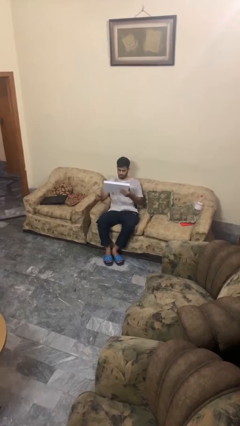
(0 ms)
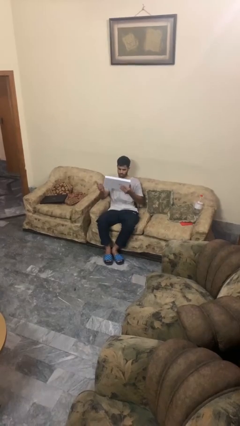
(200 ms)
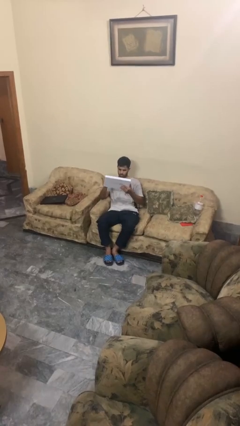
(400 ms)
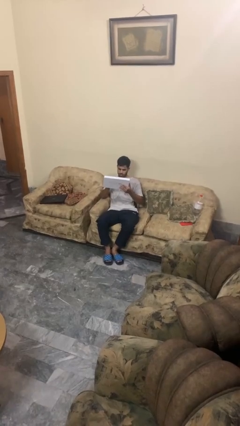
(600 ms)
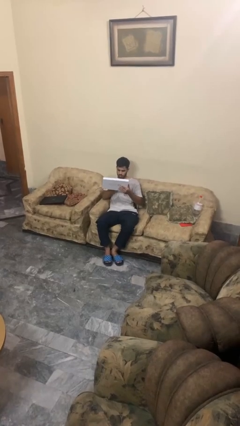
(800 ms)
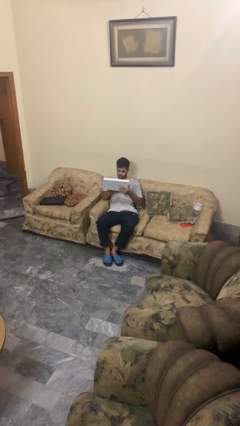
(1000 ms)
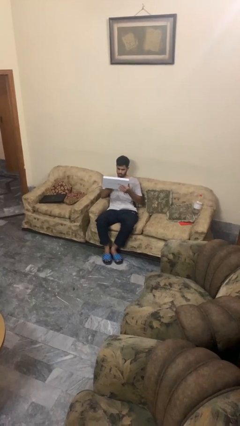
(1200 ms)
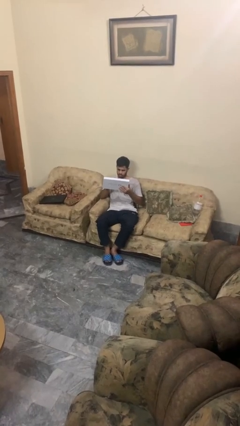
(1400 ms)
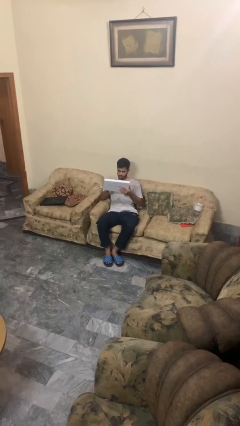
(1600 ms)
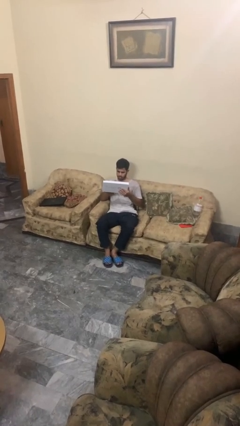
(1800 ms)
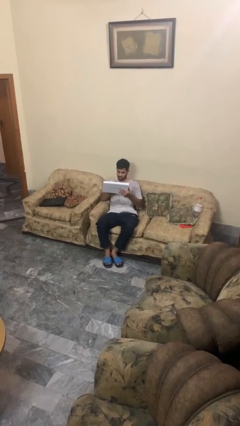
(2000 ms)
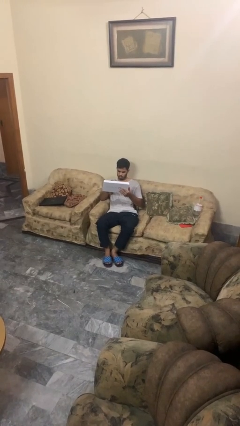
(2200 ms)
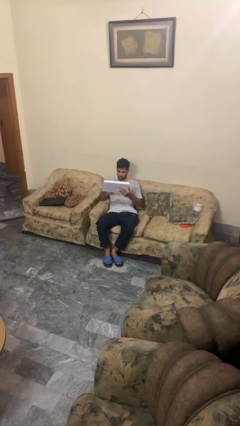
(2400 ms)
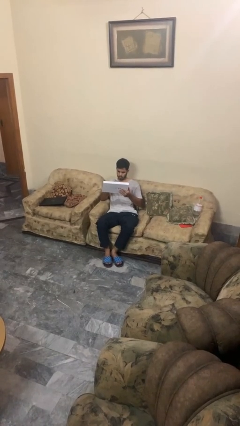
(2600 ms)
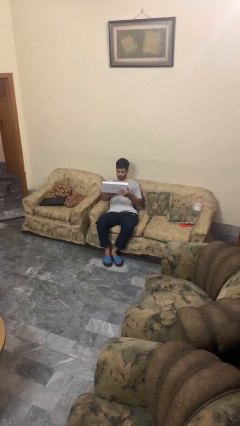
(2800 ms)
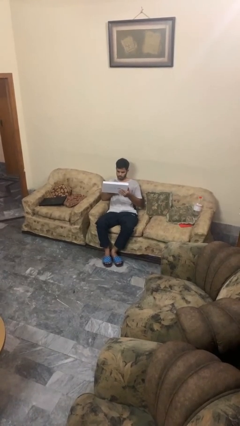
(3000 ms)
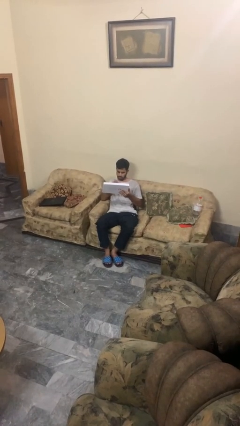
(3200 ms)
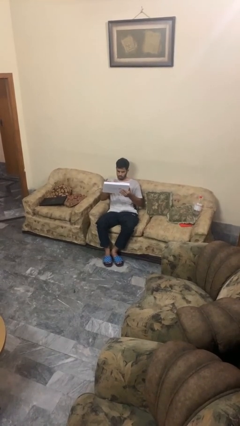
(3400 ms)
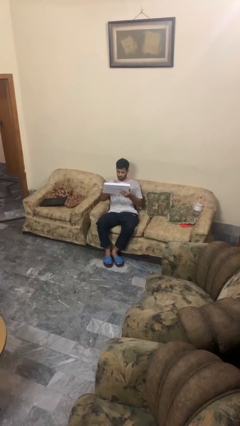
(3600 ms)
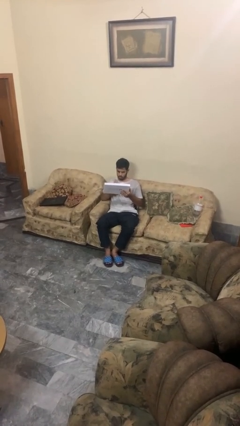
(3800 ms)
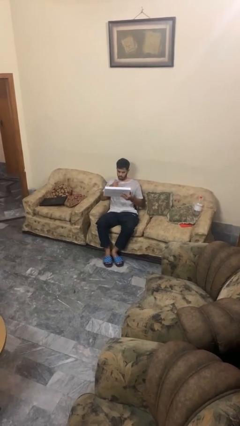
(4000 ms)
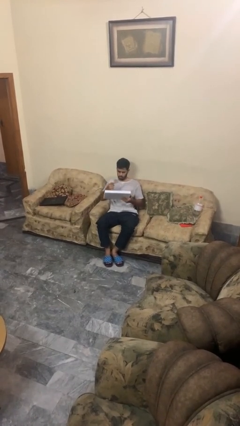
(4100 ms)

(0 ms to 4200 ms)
person interacts with tablet

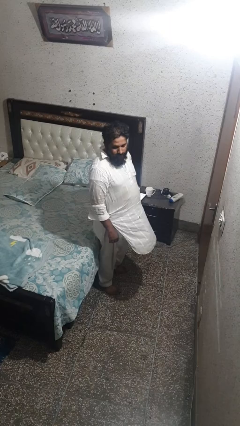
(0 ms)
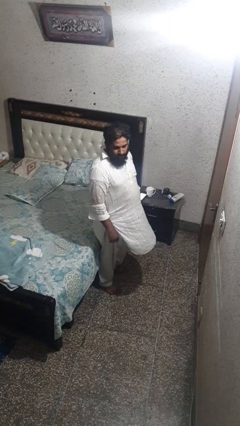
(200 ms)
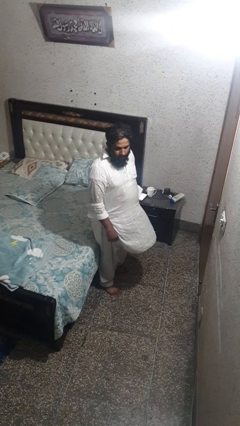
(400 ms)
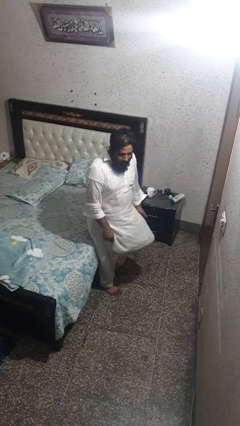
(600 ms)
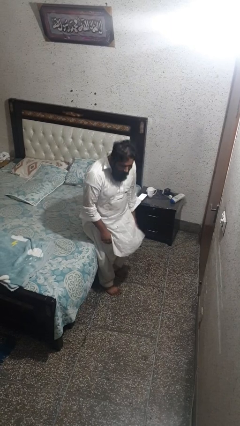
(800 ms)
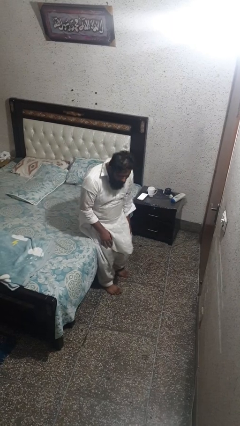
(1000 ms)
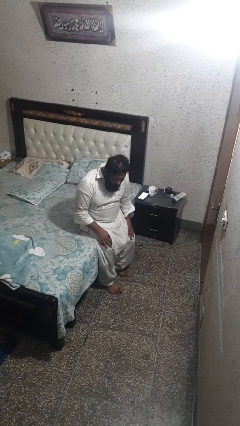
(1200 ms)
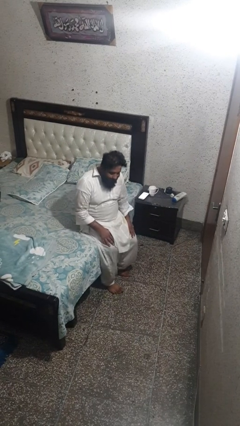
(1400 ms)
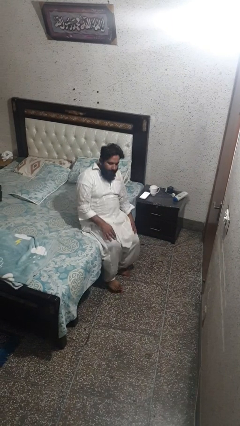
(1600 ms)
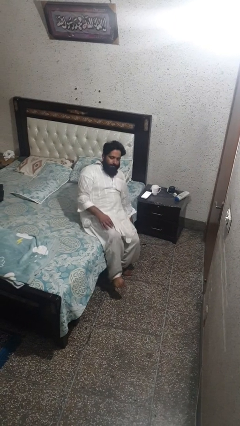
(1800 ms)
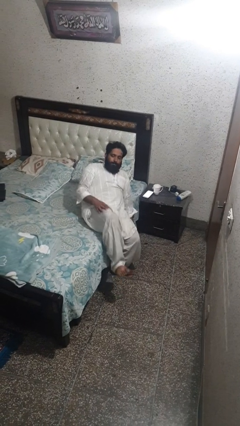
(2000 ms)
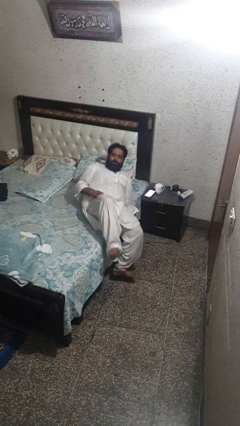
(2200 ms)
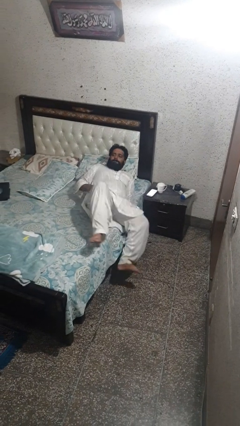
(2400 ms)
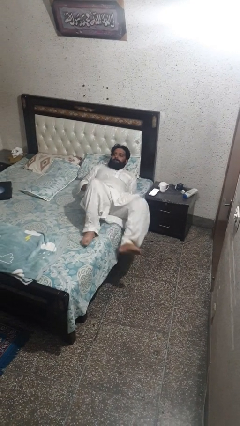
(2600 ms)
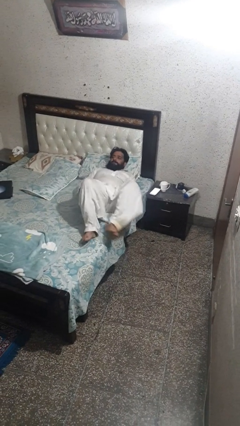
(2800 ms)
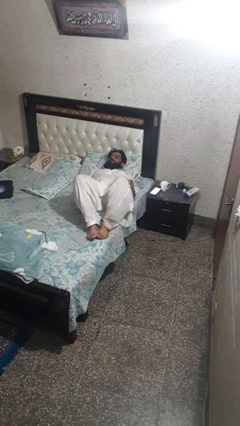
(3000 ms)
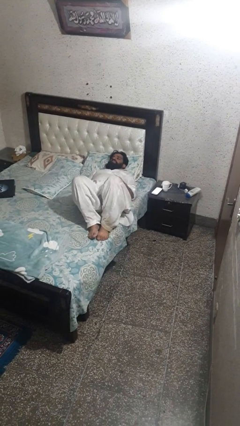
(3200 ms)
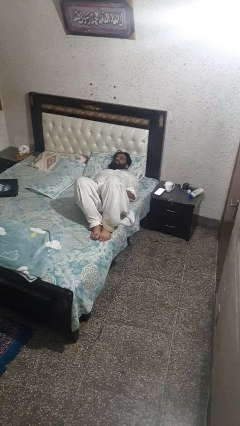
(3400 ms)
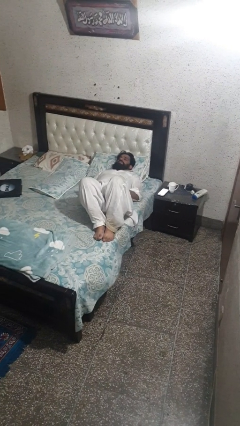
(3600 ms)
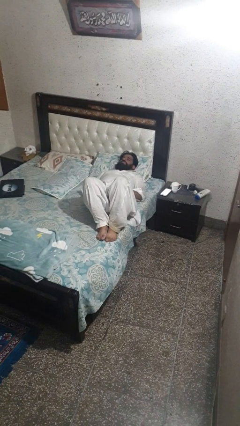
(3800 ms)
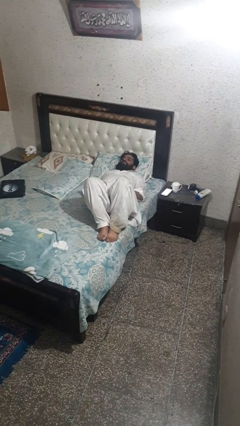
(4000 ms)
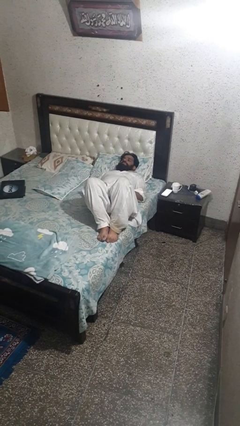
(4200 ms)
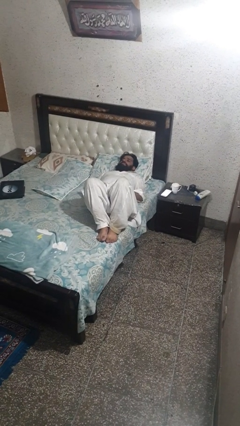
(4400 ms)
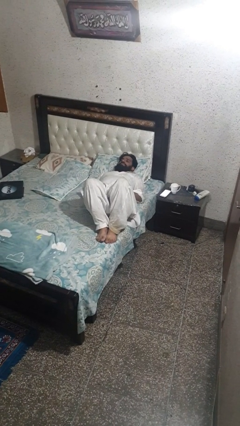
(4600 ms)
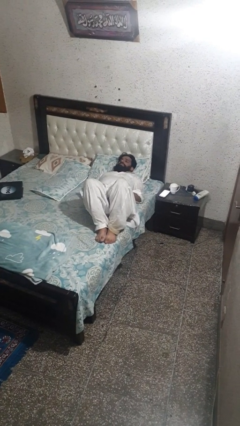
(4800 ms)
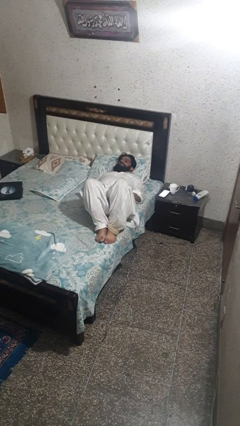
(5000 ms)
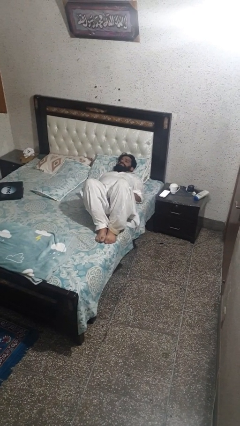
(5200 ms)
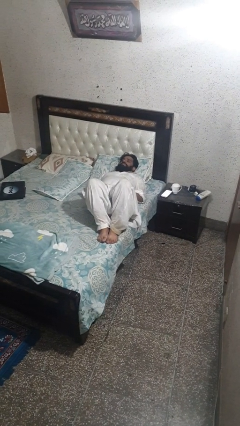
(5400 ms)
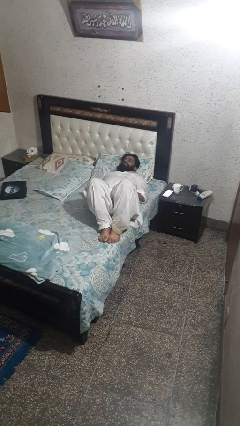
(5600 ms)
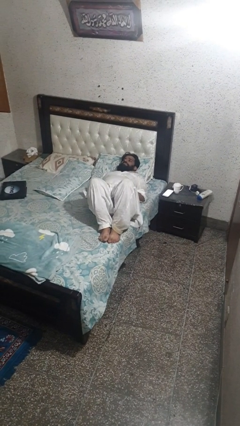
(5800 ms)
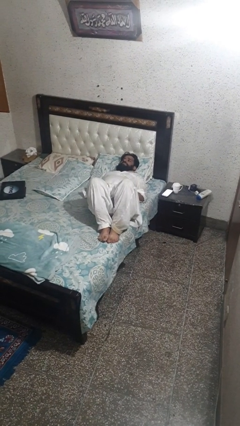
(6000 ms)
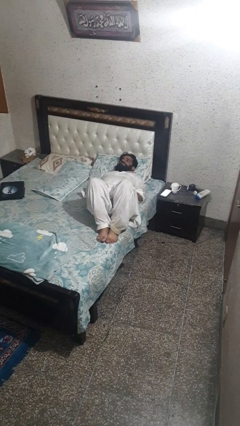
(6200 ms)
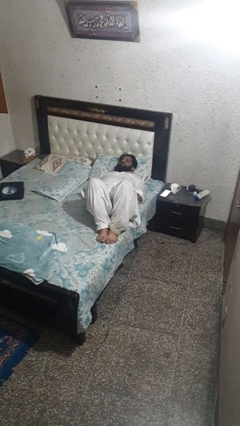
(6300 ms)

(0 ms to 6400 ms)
person lies down on bed

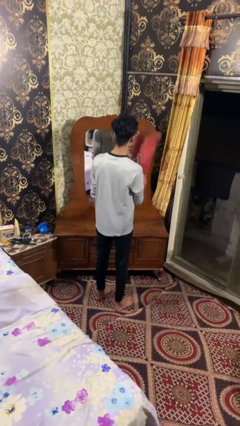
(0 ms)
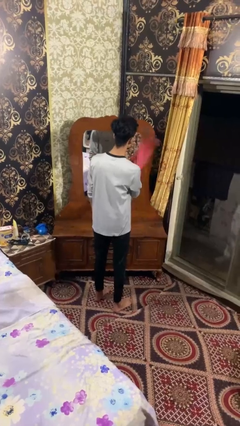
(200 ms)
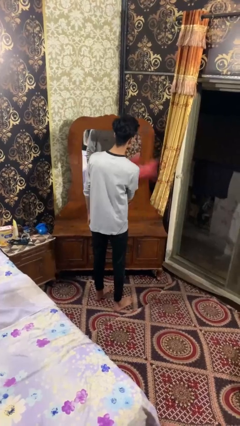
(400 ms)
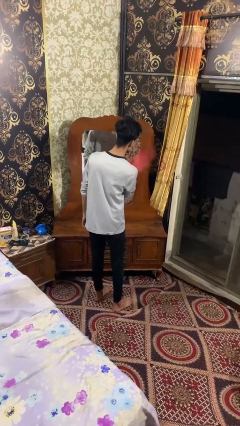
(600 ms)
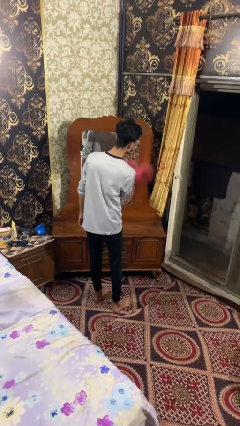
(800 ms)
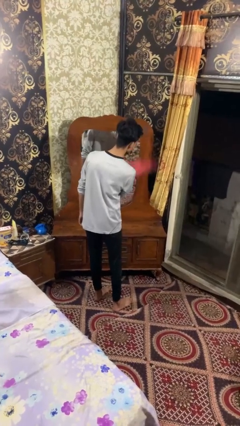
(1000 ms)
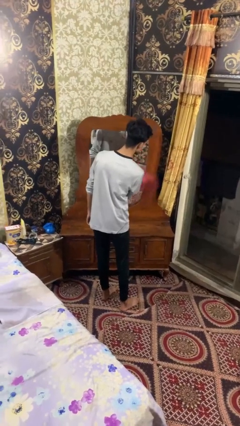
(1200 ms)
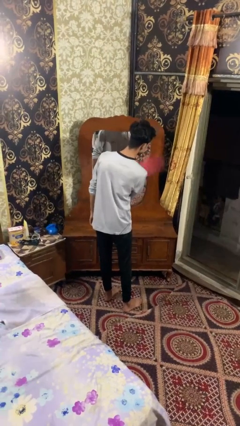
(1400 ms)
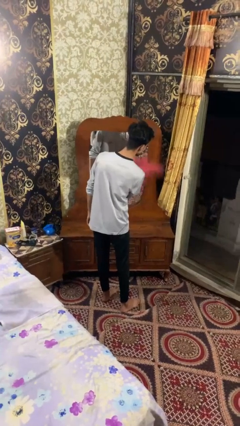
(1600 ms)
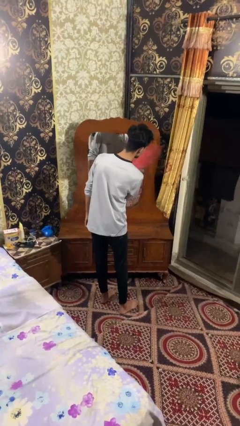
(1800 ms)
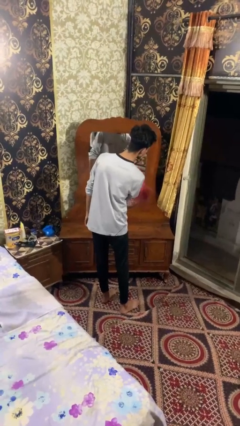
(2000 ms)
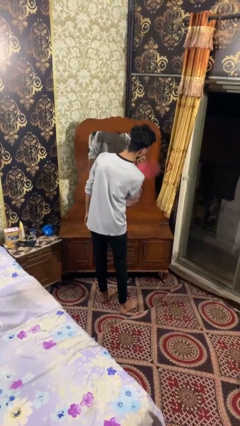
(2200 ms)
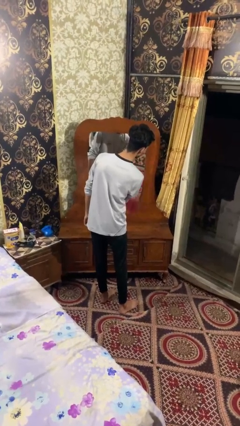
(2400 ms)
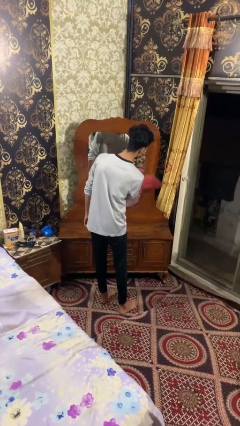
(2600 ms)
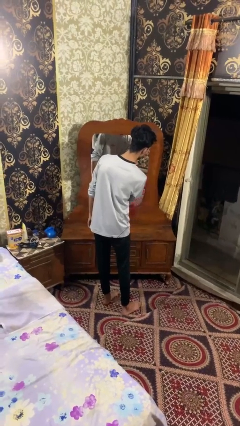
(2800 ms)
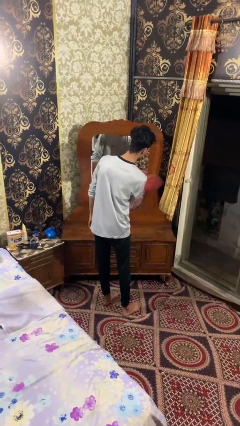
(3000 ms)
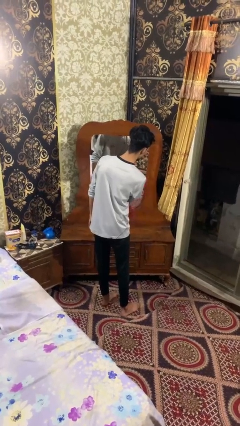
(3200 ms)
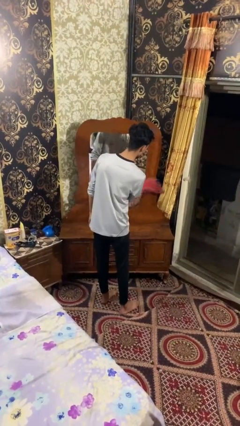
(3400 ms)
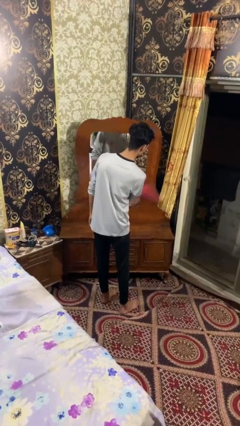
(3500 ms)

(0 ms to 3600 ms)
person dusts furniture

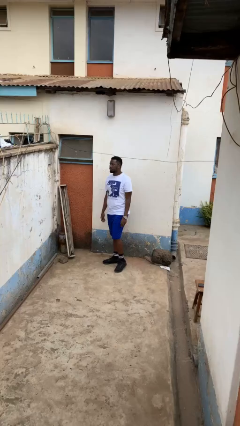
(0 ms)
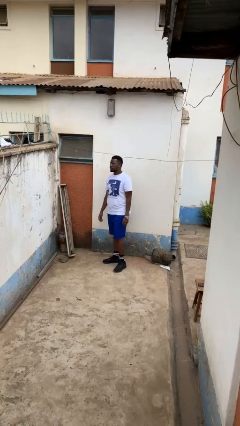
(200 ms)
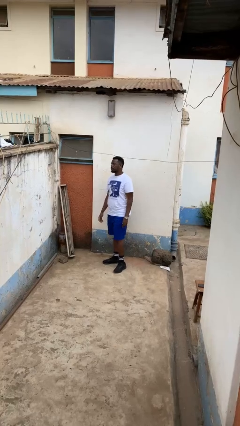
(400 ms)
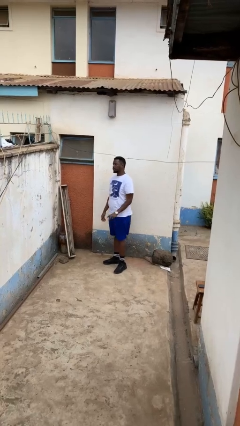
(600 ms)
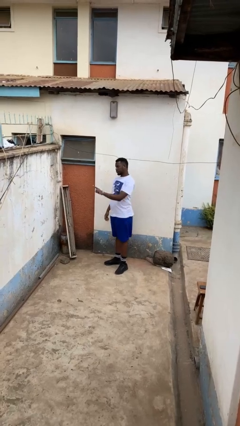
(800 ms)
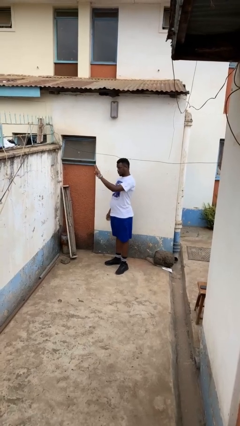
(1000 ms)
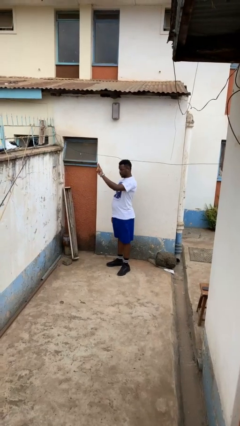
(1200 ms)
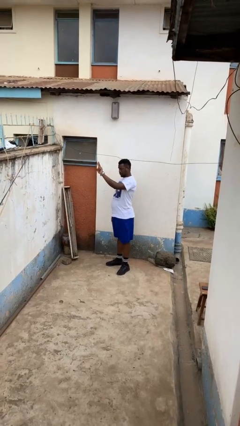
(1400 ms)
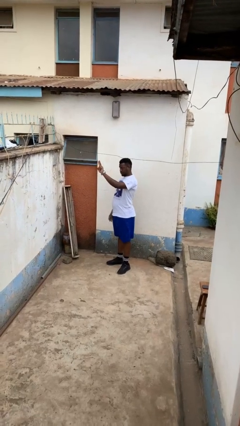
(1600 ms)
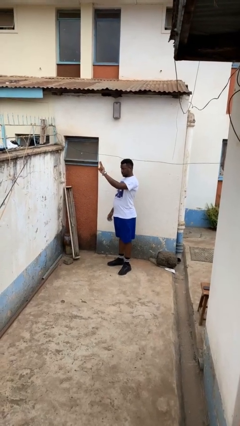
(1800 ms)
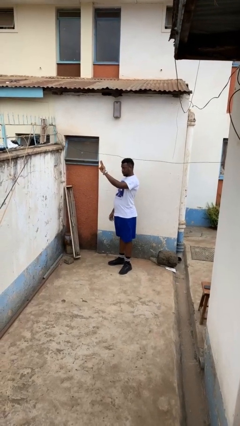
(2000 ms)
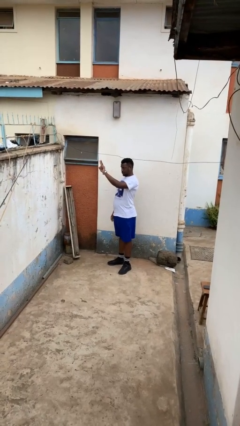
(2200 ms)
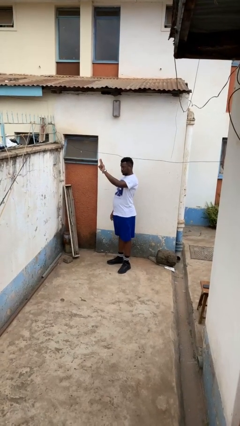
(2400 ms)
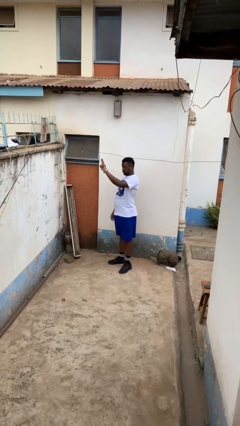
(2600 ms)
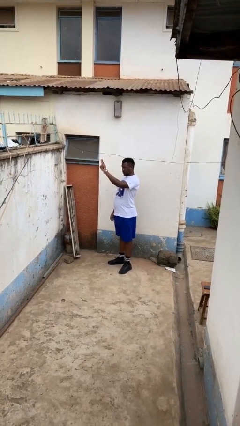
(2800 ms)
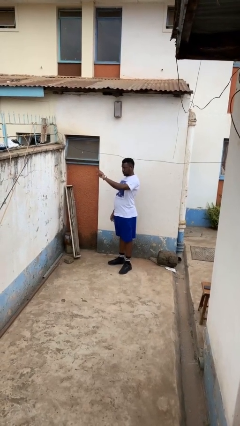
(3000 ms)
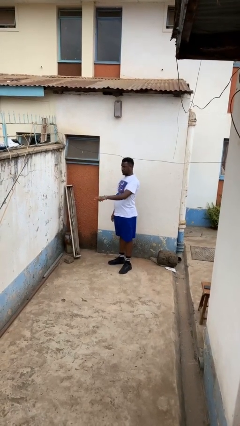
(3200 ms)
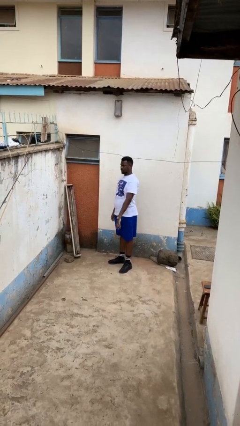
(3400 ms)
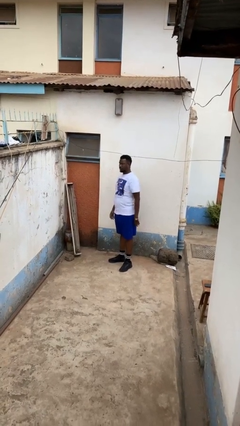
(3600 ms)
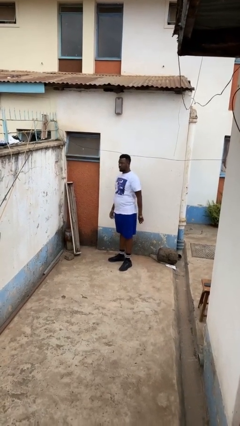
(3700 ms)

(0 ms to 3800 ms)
person gestures peace
